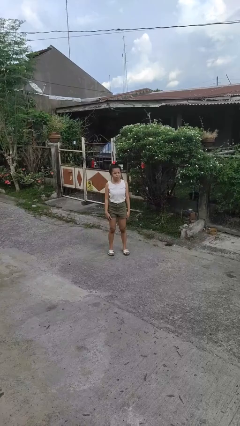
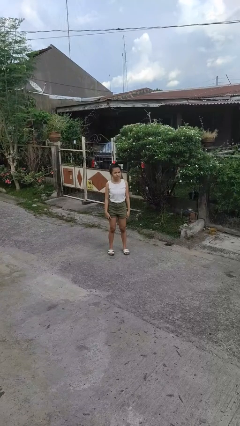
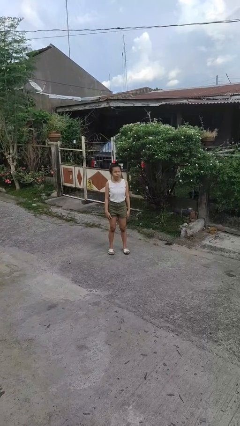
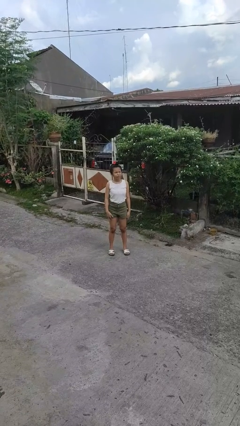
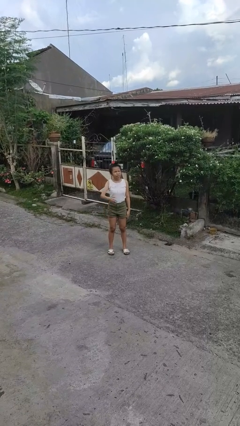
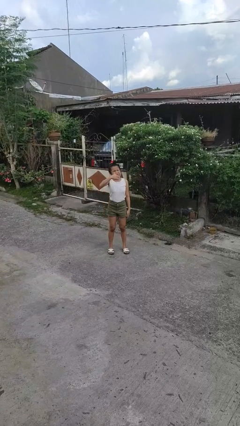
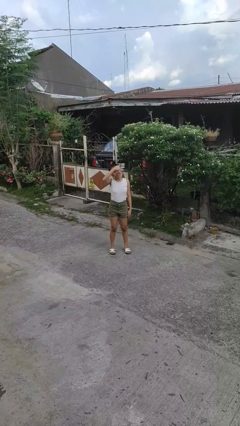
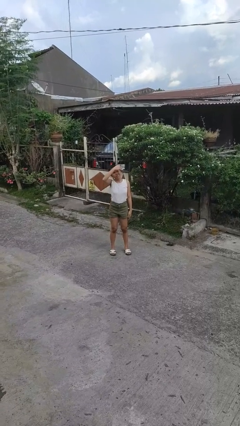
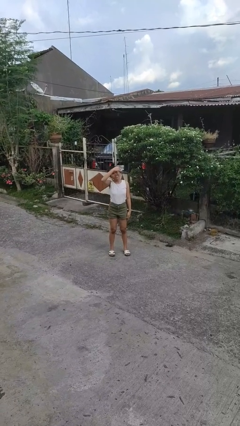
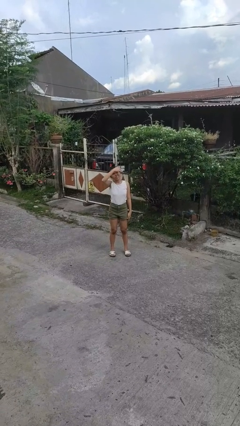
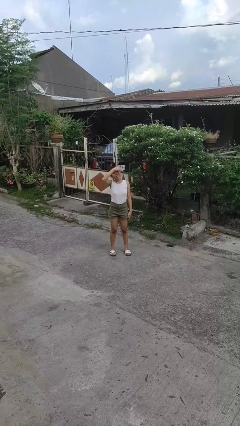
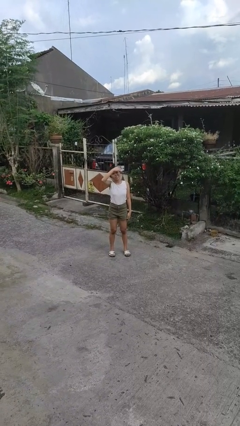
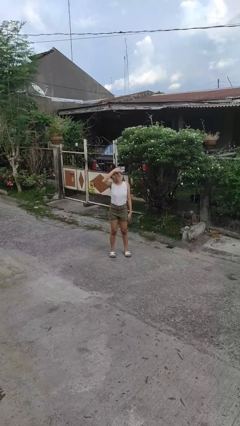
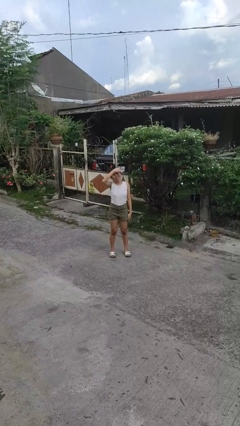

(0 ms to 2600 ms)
person shades eyes

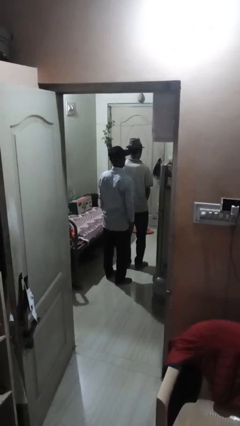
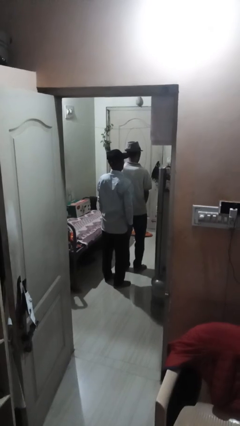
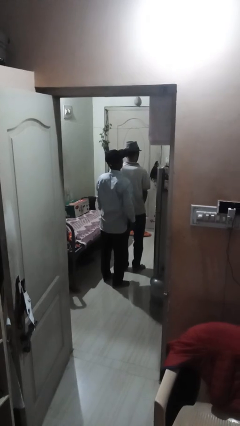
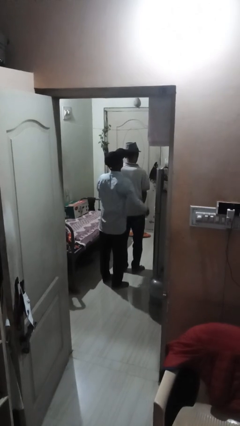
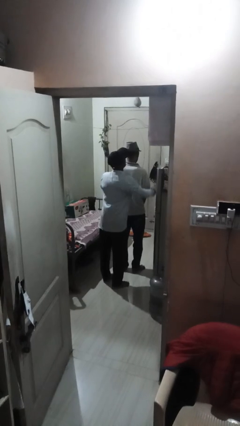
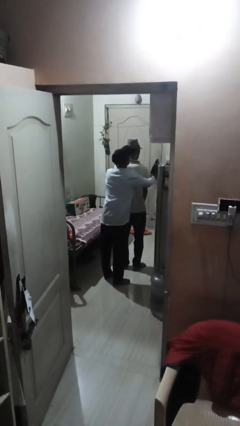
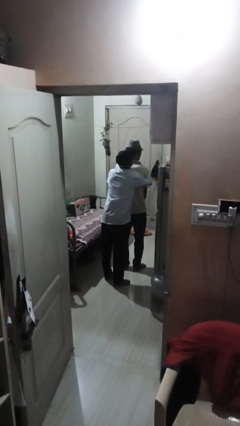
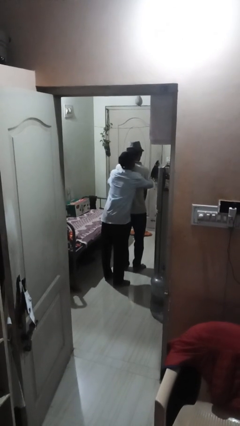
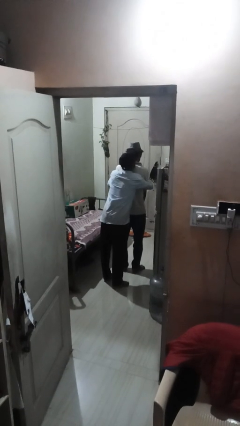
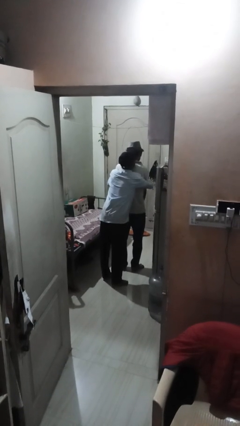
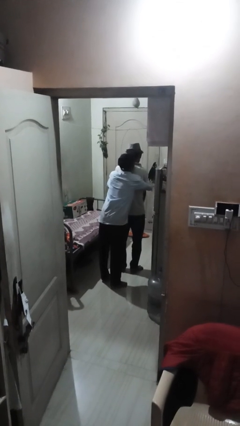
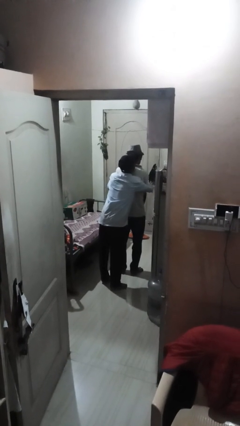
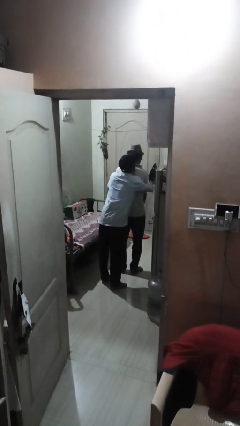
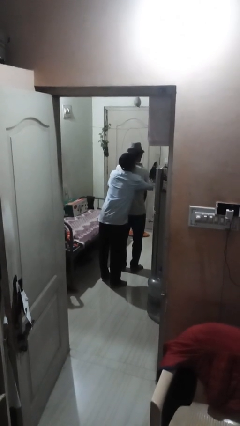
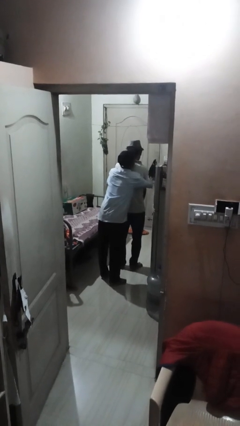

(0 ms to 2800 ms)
person hugs person from behind

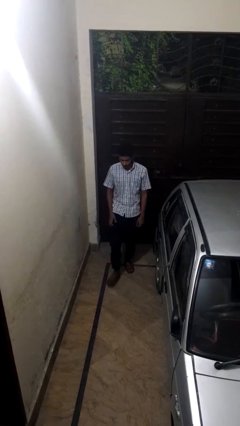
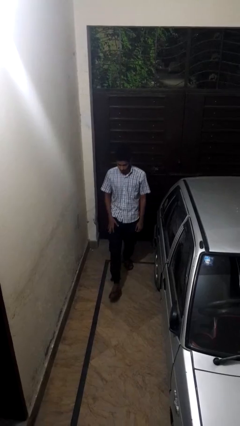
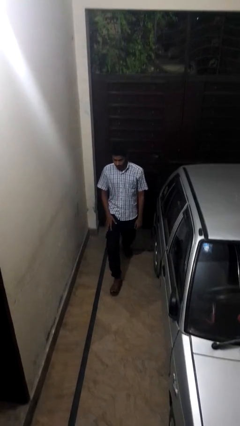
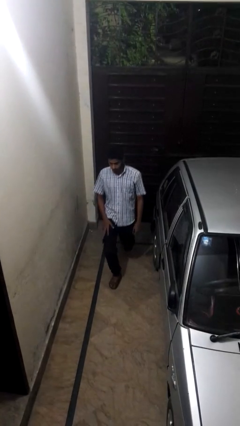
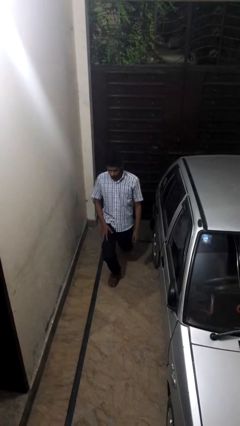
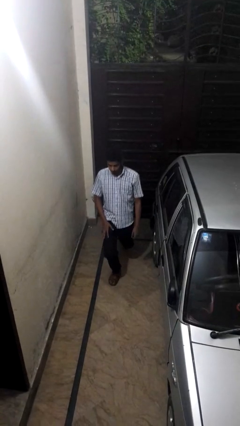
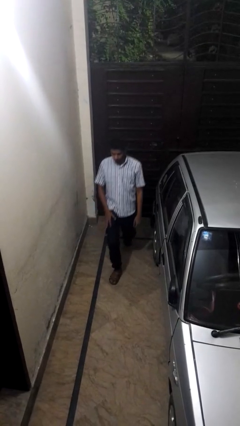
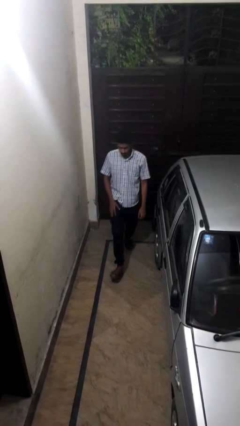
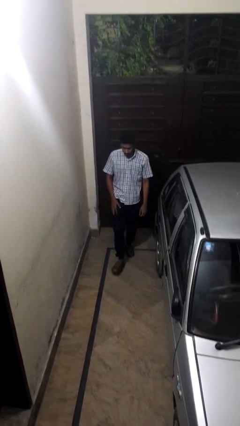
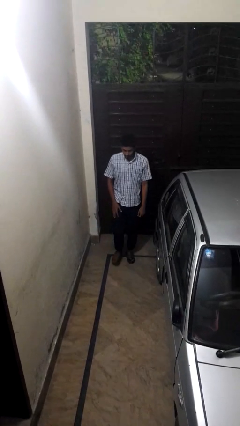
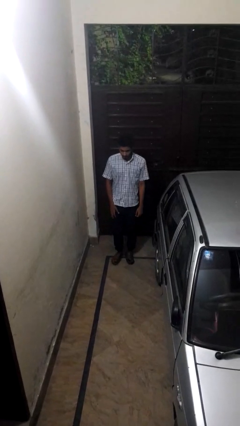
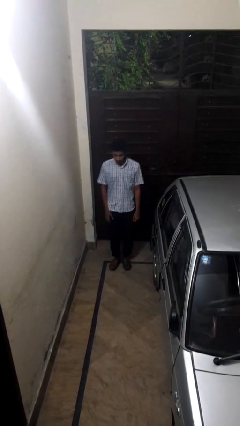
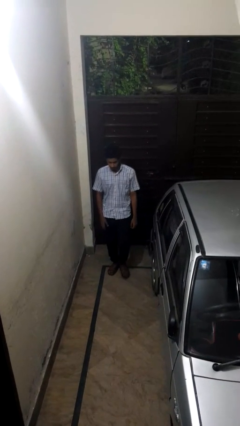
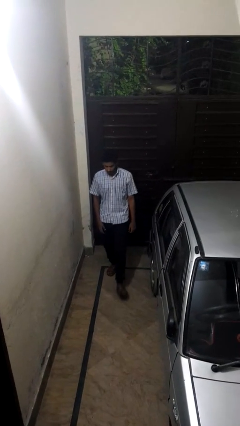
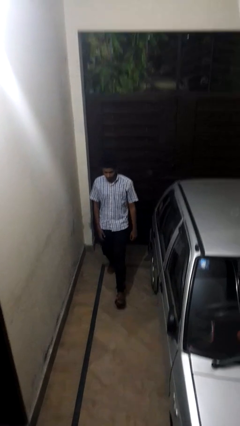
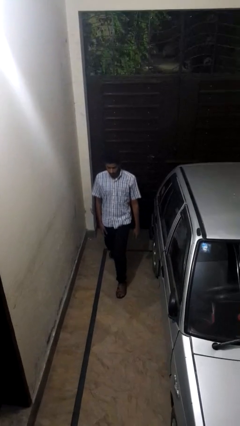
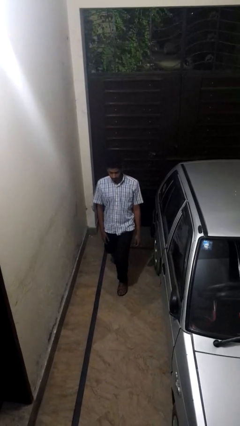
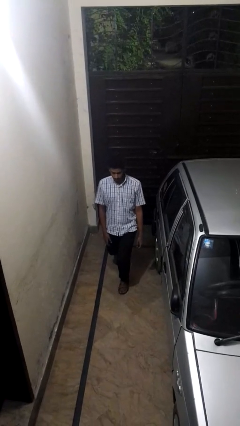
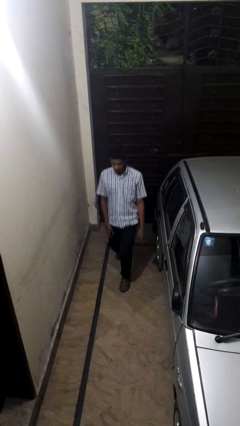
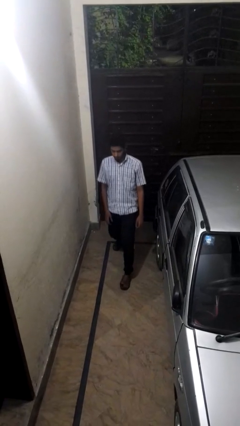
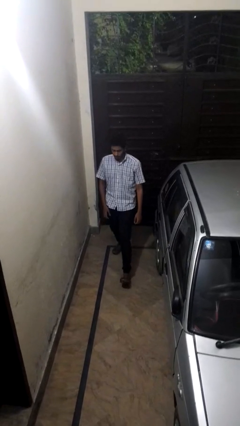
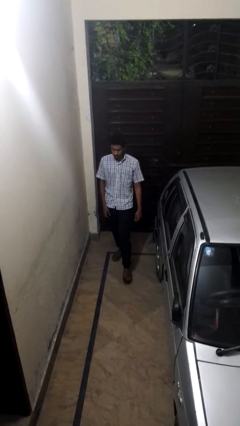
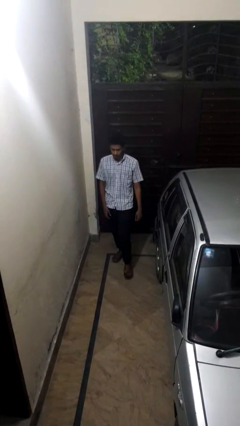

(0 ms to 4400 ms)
person exercises with lunges

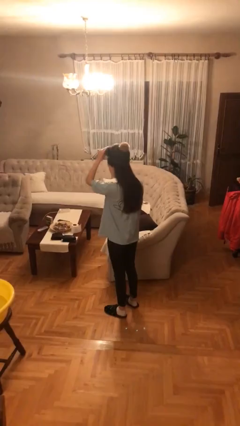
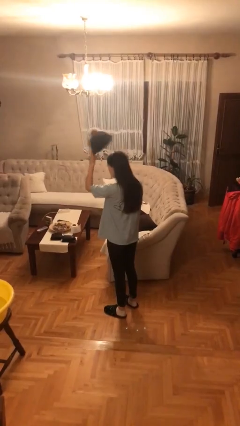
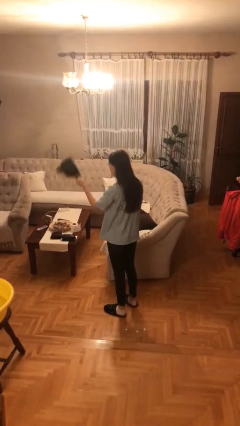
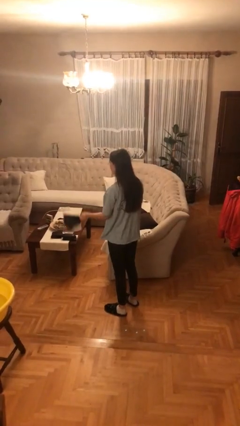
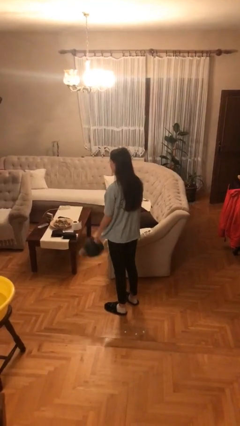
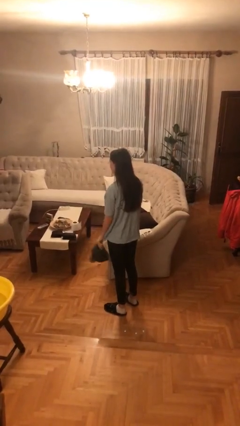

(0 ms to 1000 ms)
person takes off hat

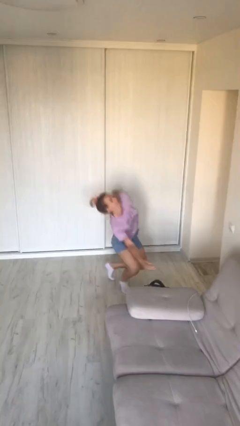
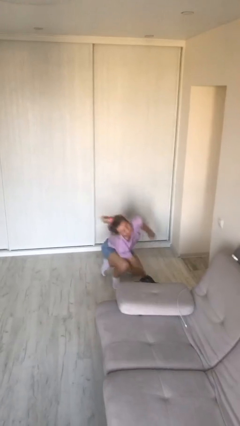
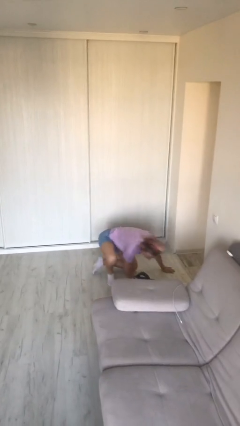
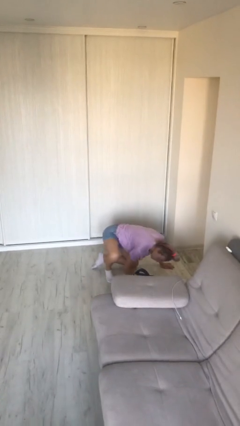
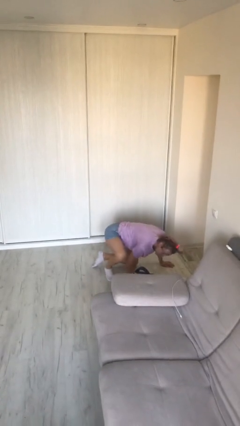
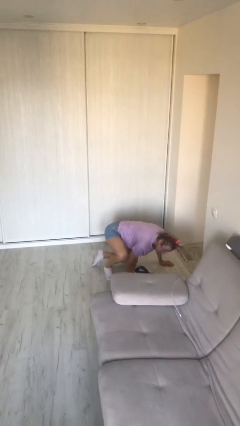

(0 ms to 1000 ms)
person trips on object on floor

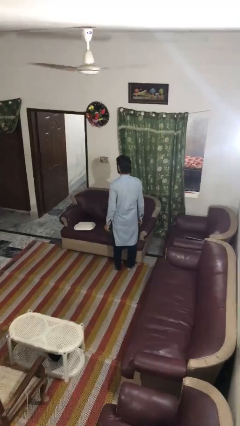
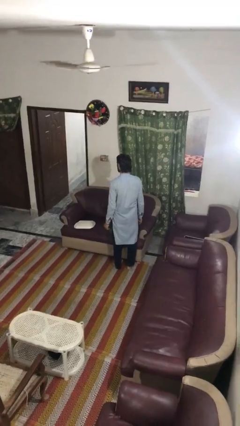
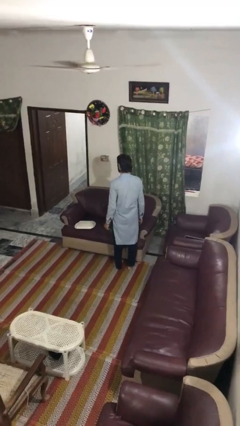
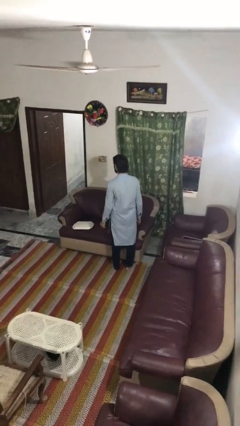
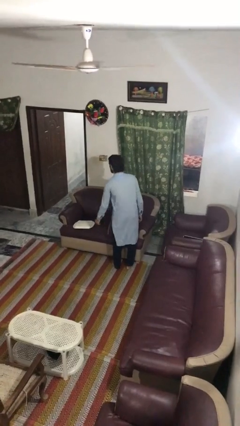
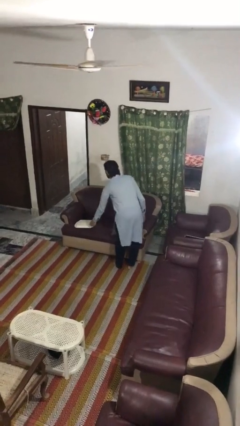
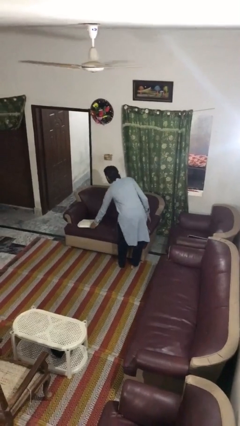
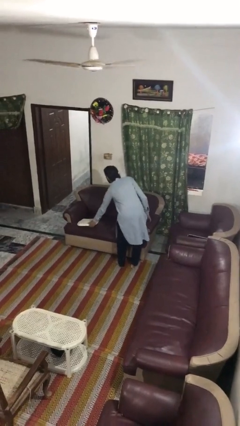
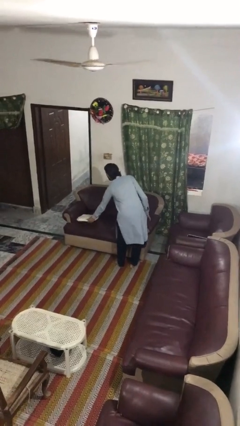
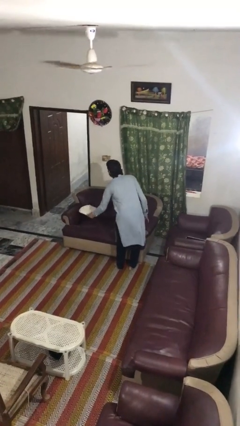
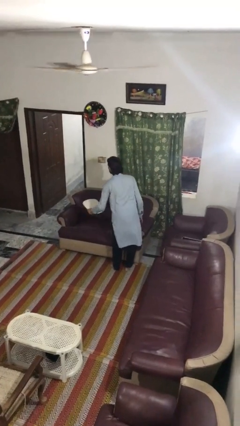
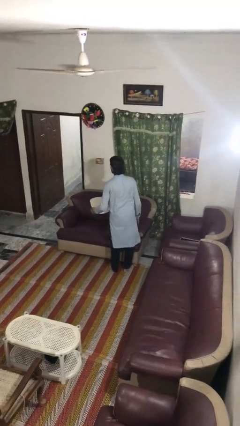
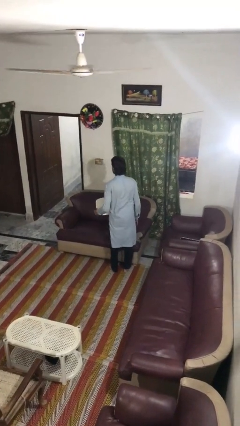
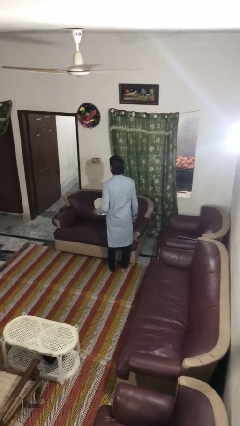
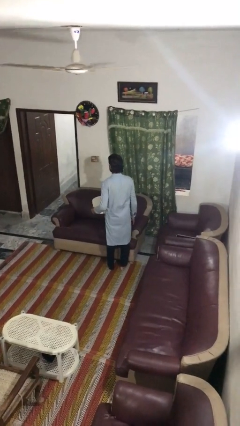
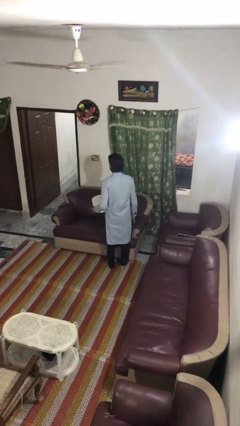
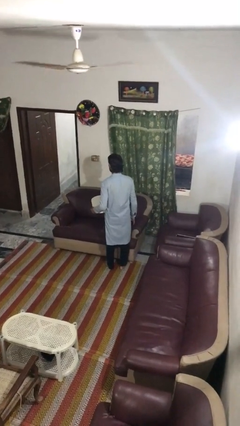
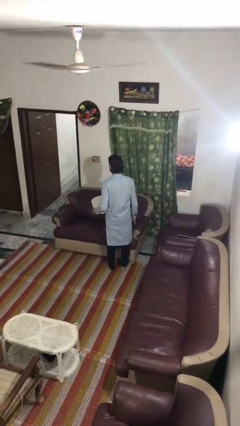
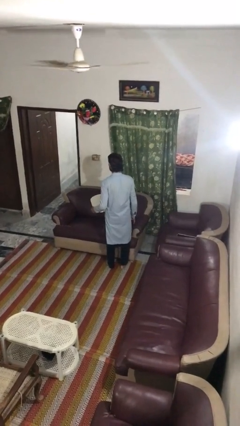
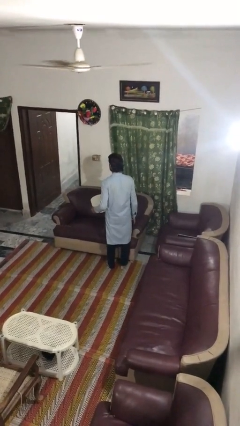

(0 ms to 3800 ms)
person picks up object from couch

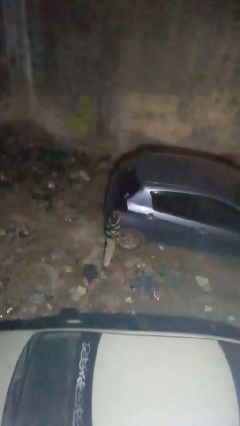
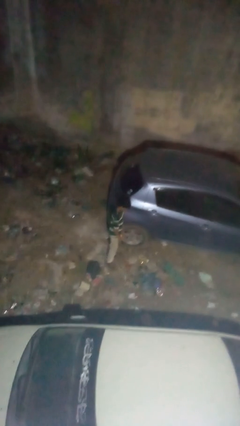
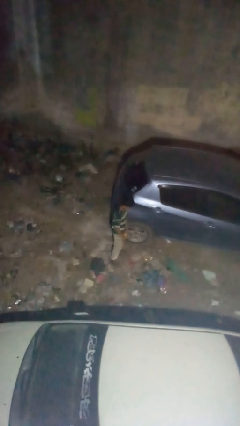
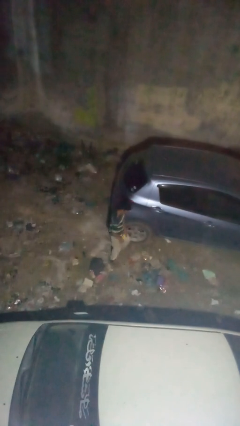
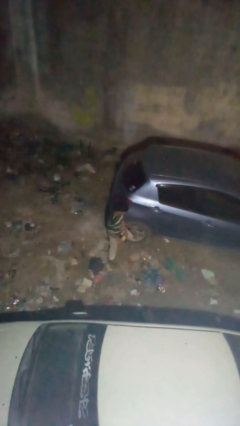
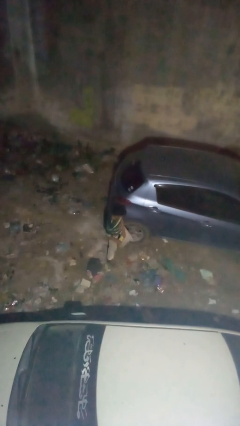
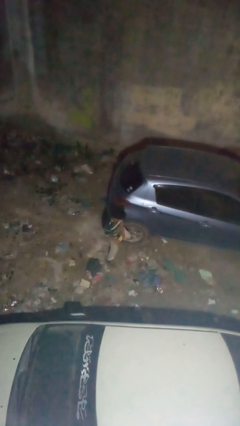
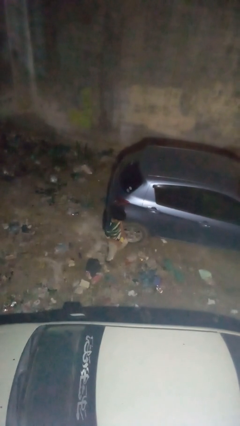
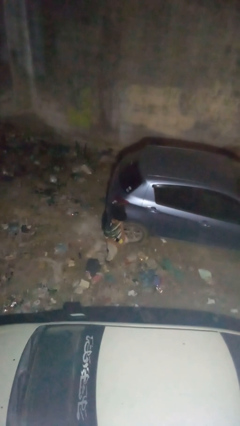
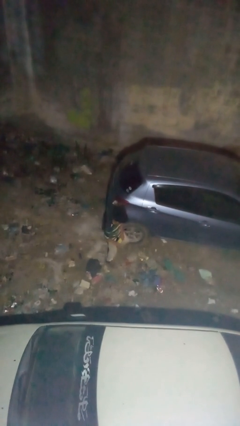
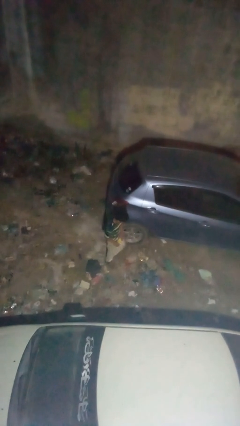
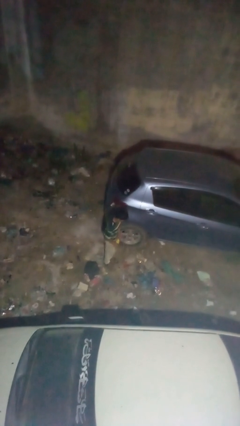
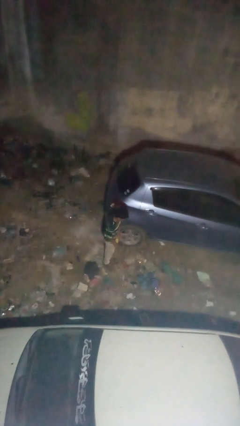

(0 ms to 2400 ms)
person kicks car tires
